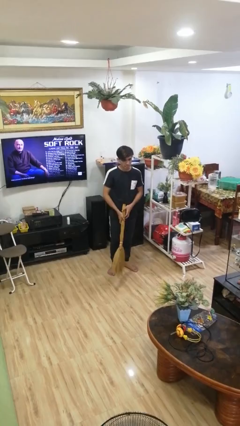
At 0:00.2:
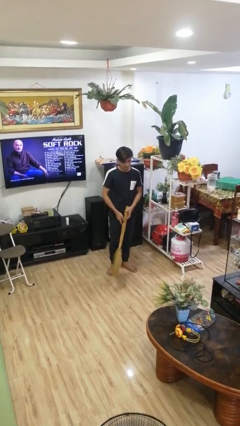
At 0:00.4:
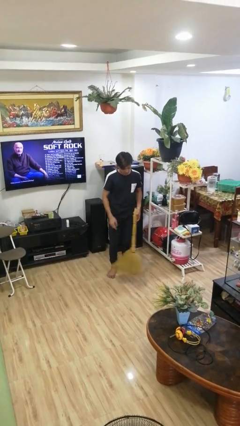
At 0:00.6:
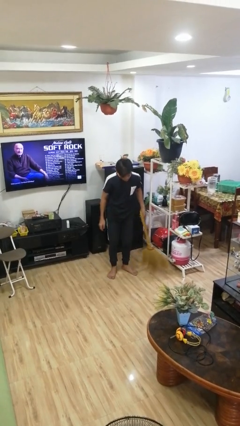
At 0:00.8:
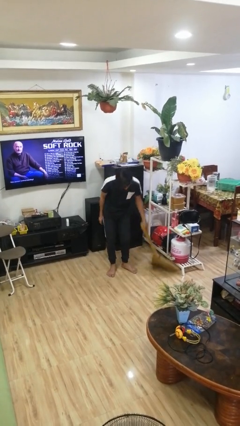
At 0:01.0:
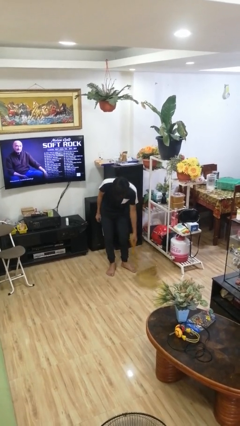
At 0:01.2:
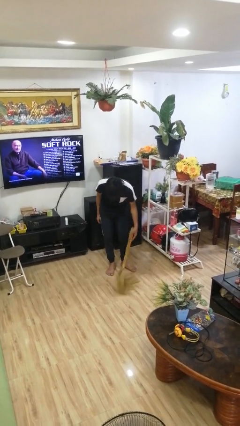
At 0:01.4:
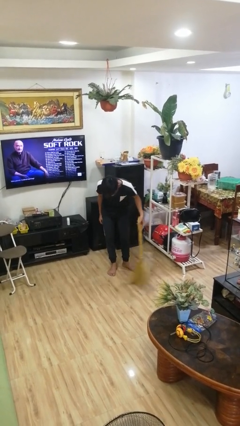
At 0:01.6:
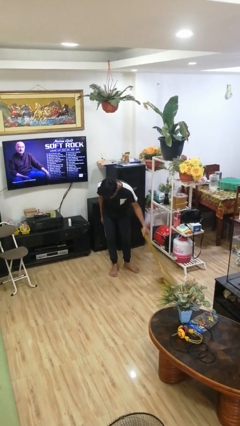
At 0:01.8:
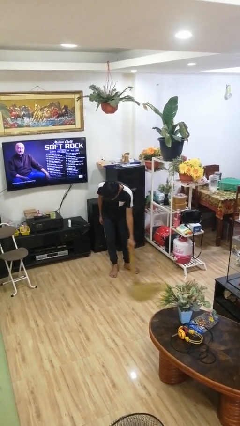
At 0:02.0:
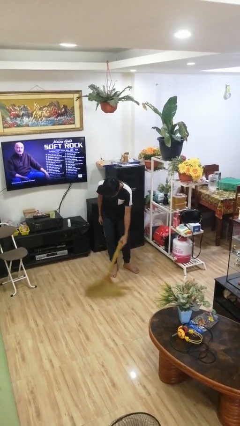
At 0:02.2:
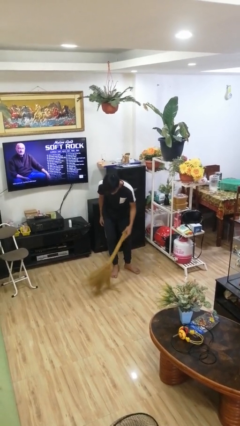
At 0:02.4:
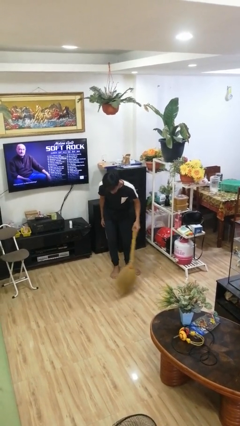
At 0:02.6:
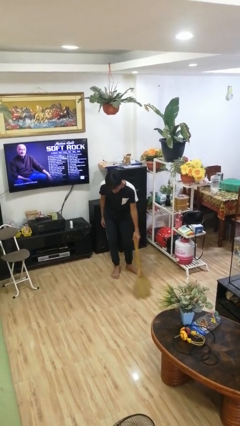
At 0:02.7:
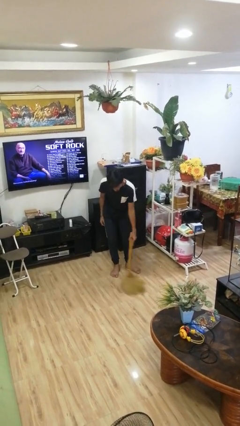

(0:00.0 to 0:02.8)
person sweeps floor

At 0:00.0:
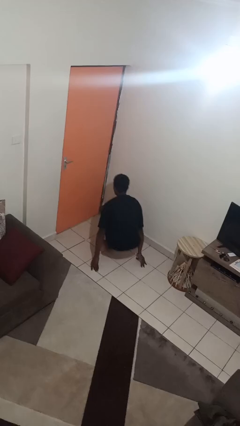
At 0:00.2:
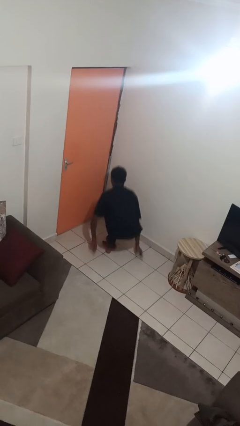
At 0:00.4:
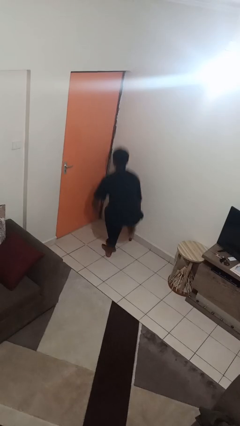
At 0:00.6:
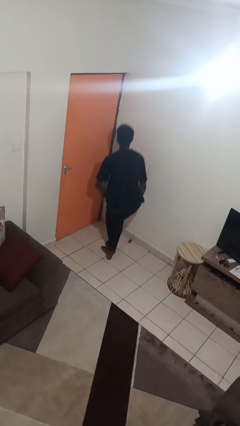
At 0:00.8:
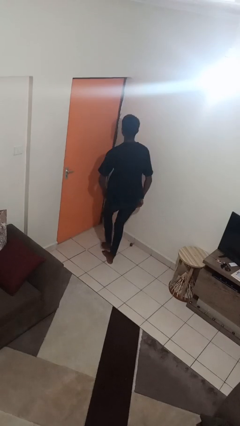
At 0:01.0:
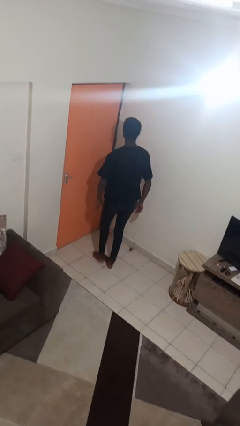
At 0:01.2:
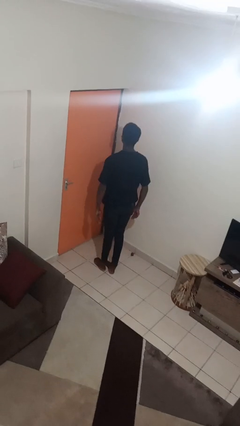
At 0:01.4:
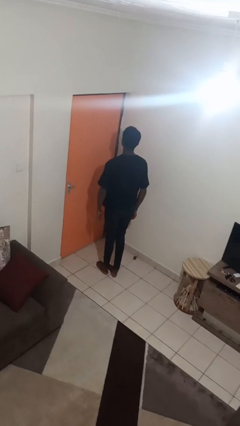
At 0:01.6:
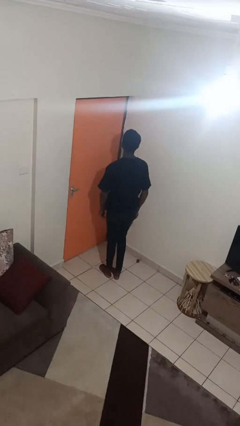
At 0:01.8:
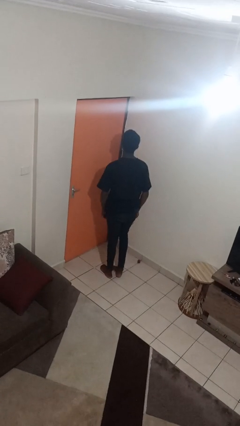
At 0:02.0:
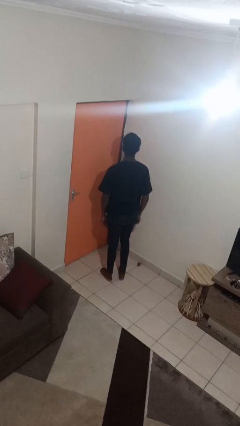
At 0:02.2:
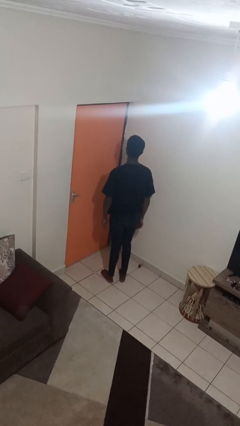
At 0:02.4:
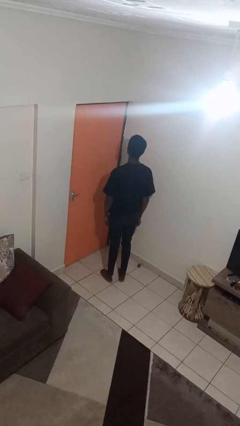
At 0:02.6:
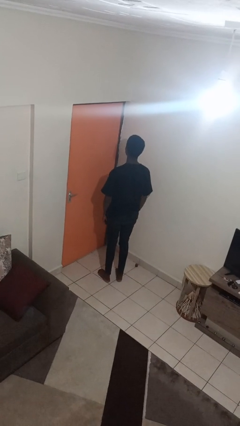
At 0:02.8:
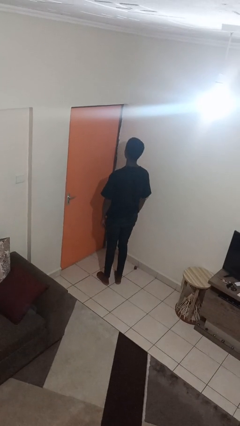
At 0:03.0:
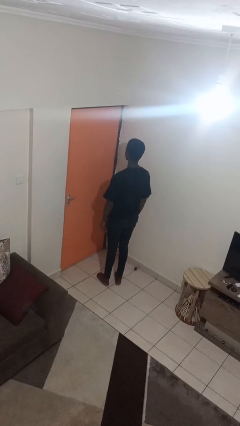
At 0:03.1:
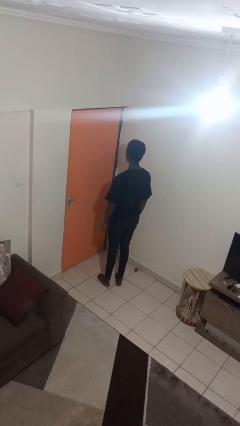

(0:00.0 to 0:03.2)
person stands up from floor

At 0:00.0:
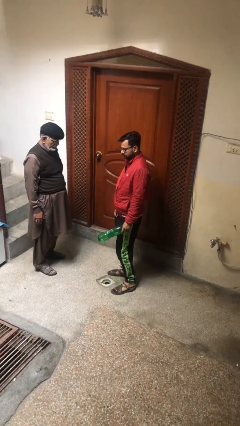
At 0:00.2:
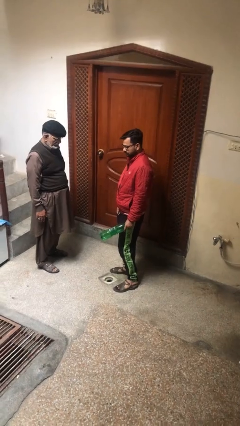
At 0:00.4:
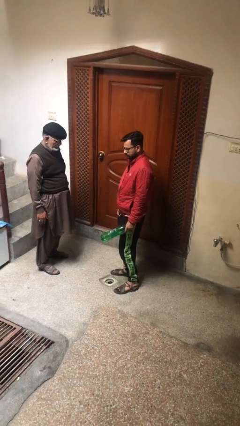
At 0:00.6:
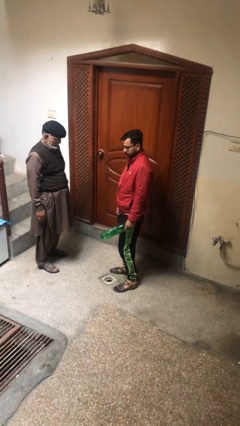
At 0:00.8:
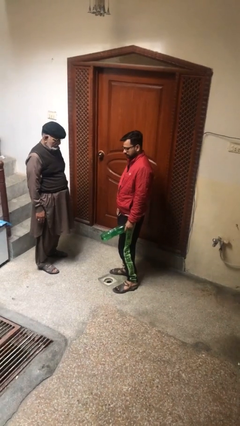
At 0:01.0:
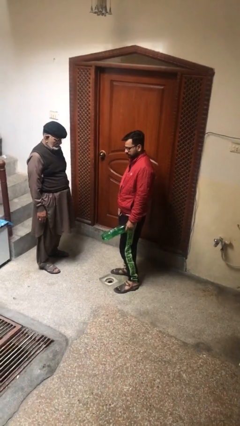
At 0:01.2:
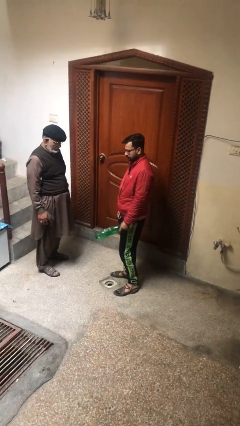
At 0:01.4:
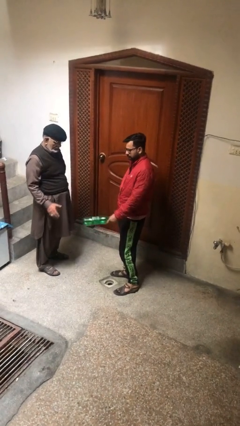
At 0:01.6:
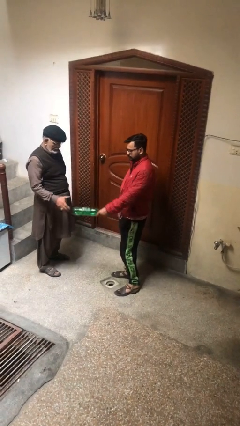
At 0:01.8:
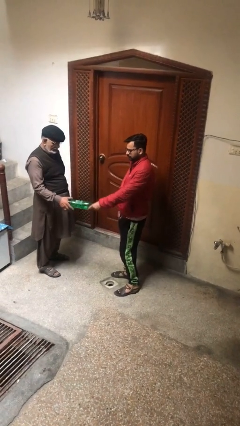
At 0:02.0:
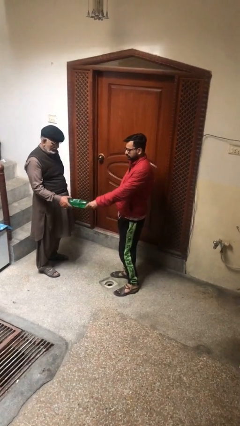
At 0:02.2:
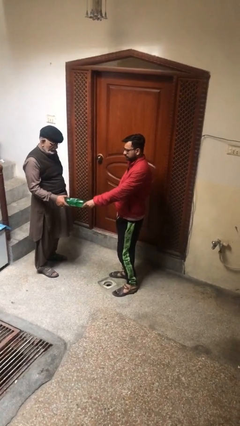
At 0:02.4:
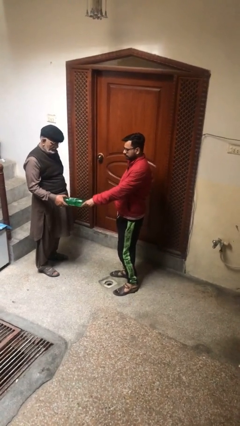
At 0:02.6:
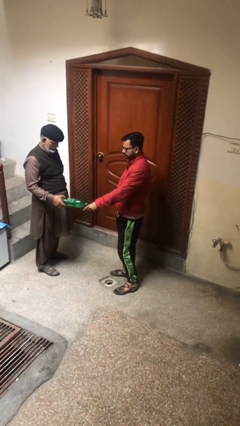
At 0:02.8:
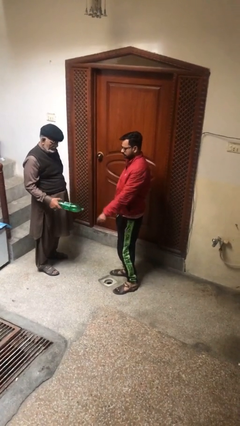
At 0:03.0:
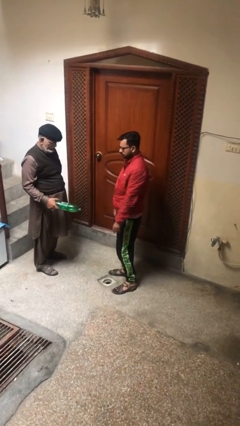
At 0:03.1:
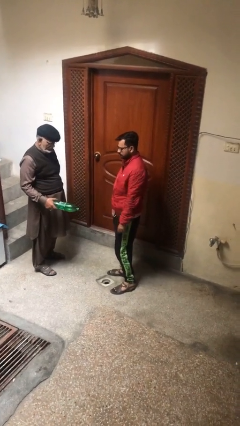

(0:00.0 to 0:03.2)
person transfers object to person

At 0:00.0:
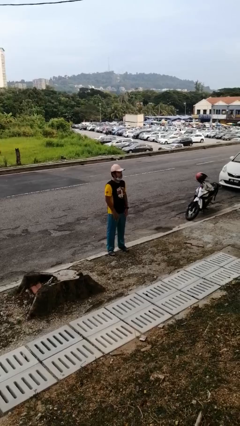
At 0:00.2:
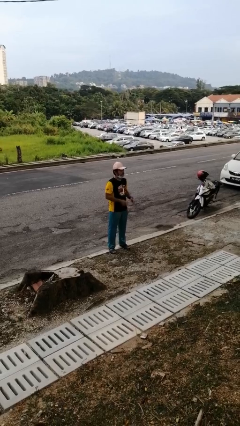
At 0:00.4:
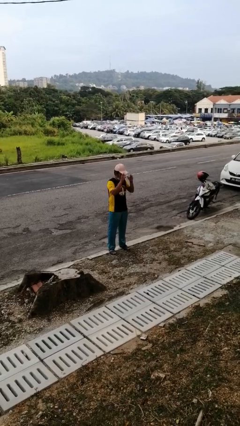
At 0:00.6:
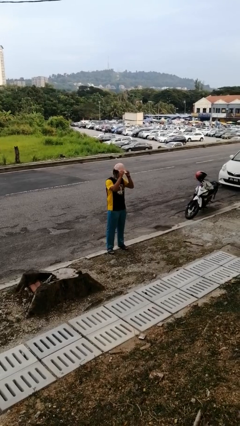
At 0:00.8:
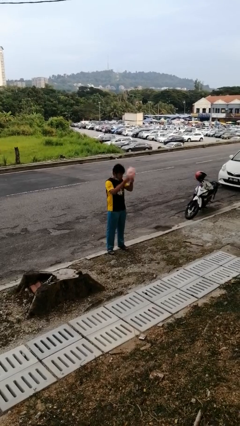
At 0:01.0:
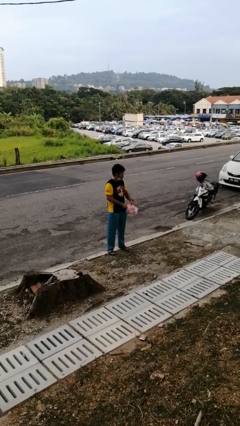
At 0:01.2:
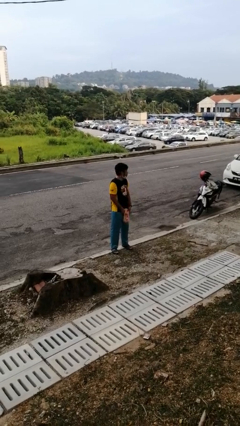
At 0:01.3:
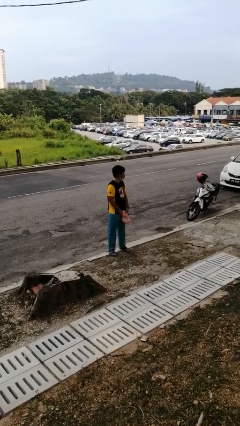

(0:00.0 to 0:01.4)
person takes off hat

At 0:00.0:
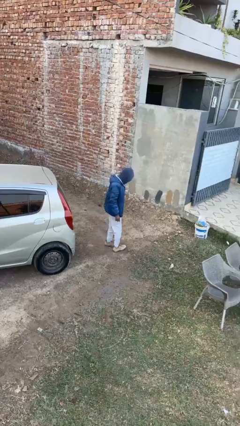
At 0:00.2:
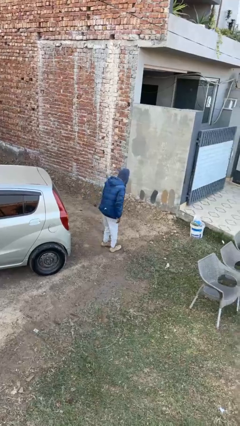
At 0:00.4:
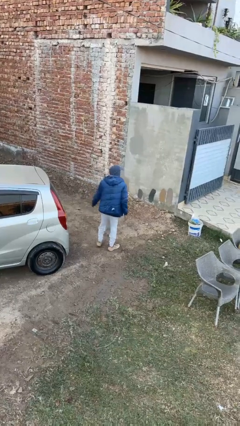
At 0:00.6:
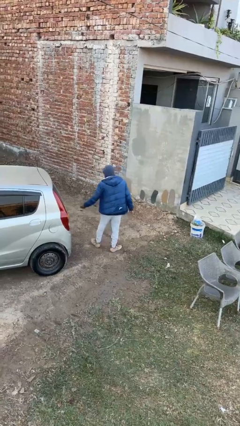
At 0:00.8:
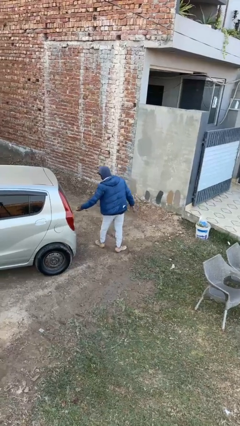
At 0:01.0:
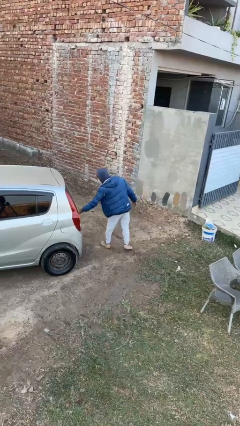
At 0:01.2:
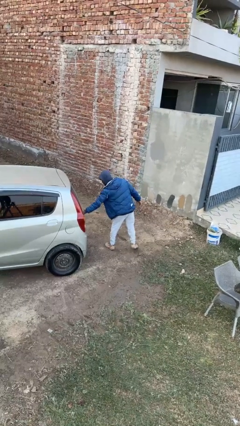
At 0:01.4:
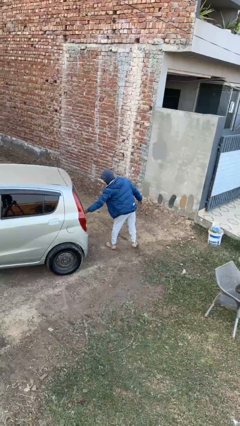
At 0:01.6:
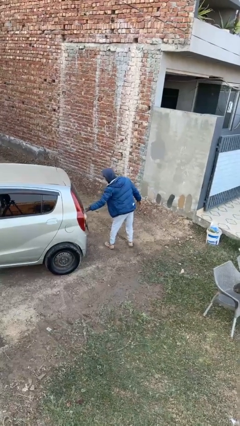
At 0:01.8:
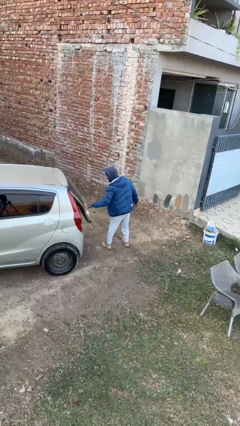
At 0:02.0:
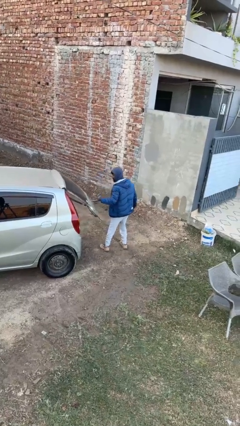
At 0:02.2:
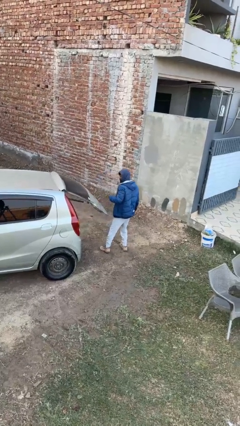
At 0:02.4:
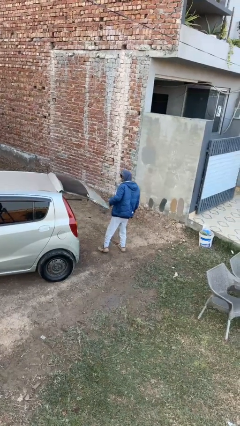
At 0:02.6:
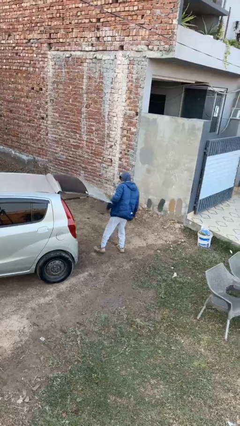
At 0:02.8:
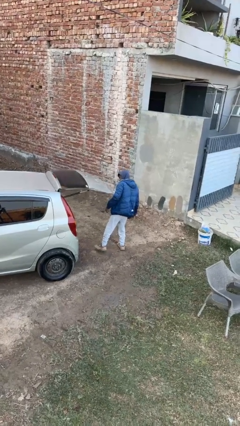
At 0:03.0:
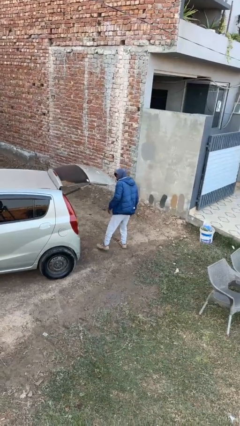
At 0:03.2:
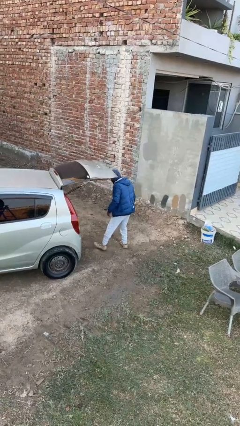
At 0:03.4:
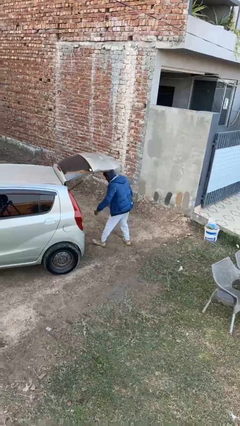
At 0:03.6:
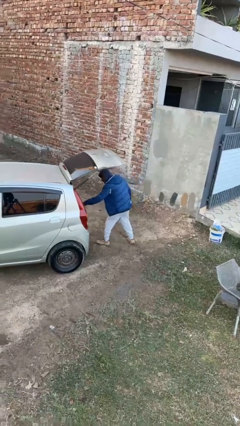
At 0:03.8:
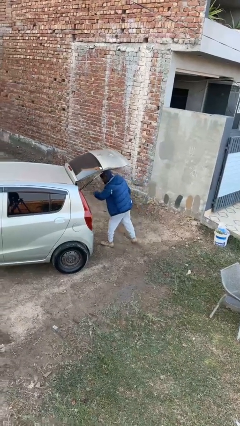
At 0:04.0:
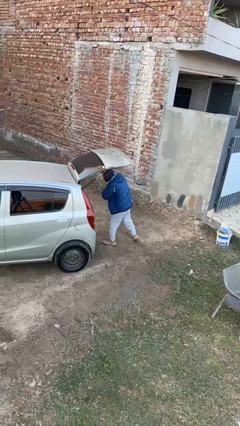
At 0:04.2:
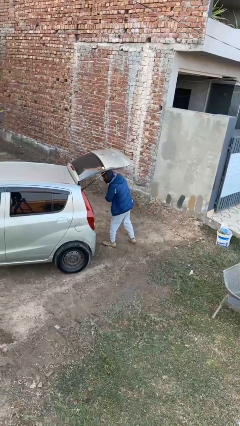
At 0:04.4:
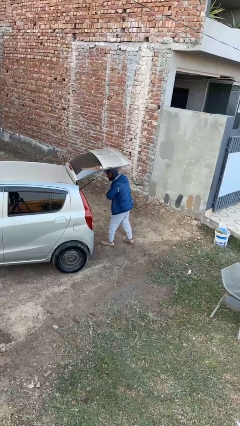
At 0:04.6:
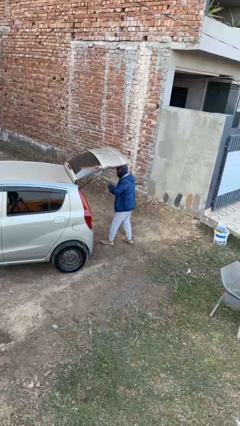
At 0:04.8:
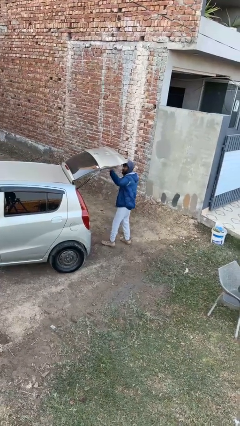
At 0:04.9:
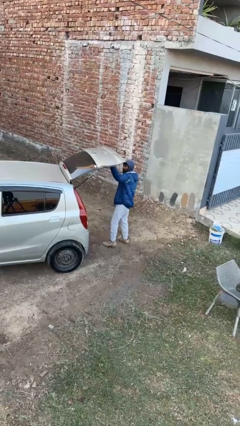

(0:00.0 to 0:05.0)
person opens car trunk

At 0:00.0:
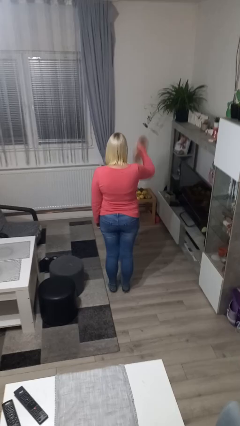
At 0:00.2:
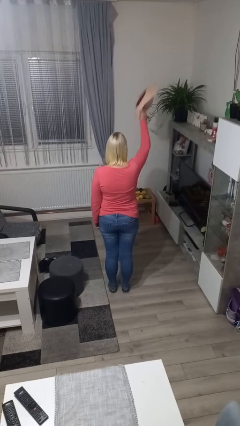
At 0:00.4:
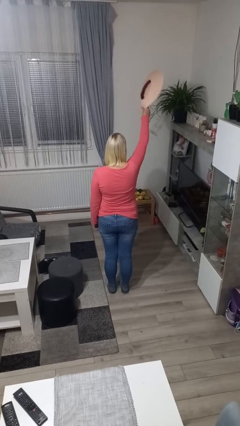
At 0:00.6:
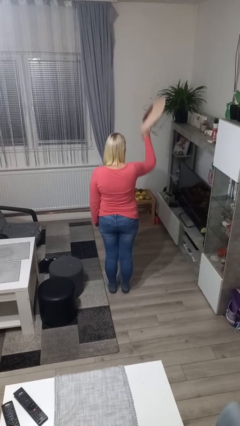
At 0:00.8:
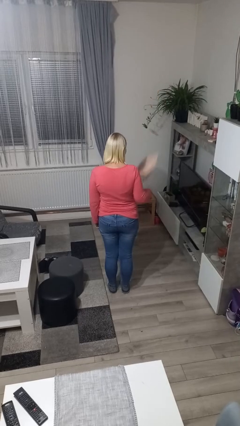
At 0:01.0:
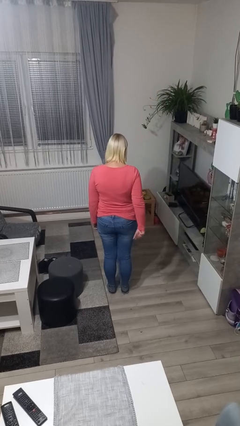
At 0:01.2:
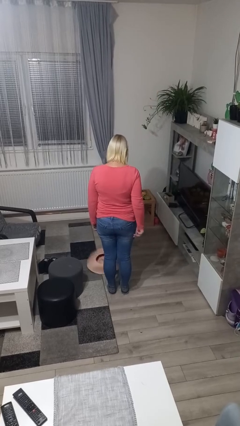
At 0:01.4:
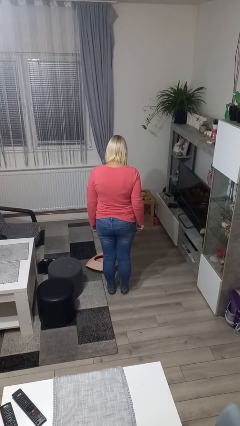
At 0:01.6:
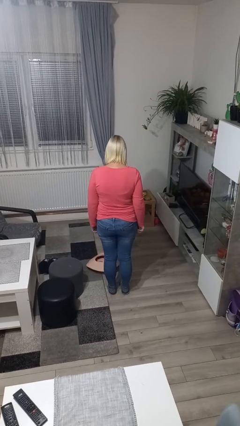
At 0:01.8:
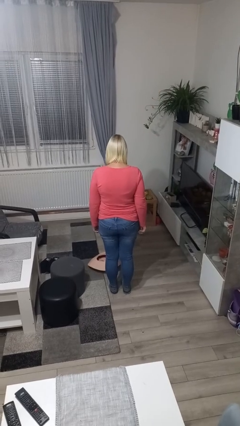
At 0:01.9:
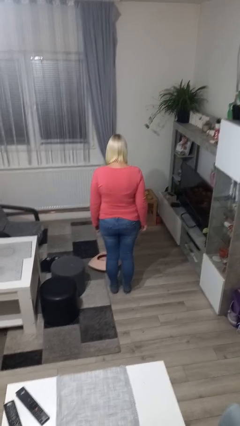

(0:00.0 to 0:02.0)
person throws object into air
